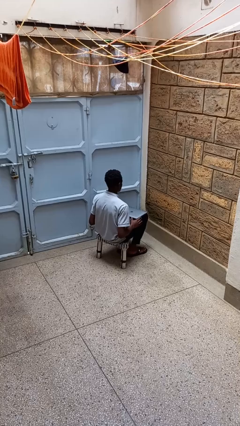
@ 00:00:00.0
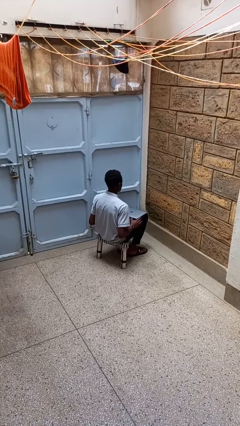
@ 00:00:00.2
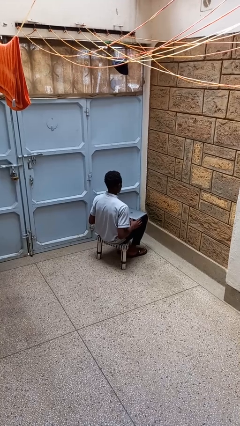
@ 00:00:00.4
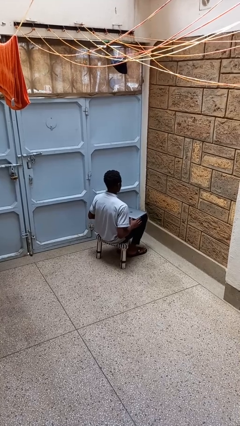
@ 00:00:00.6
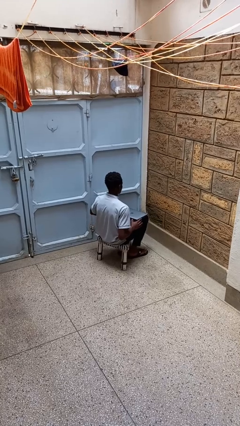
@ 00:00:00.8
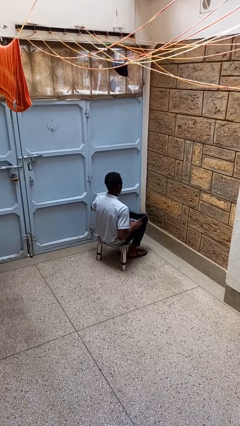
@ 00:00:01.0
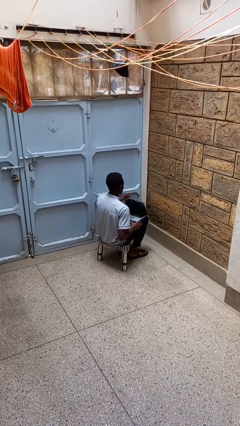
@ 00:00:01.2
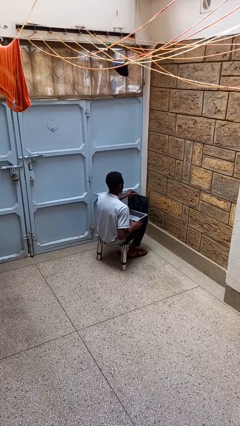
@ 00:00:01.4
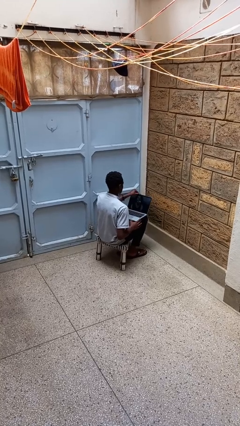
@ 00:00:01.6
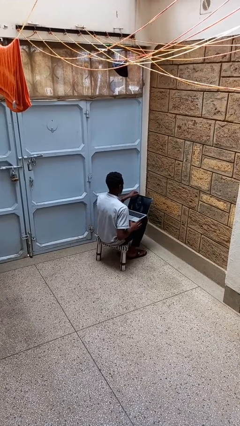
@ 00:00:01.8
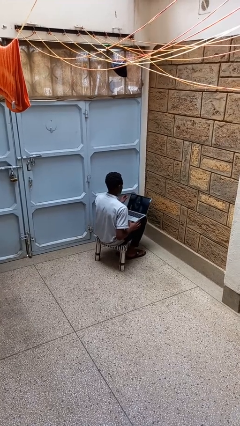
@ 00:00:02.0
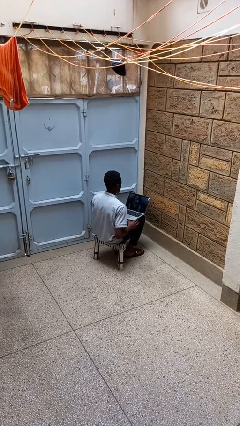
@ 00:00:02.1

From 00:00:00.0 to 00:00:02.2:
person opens laptop

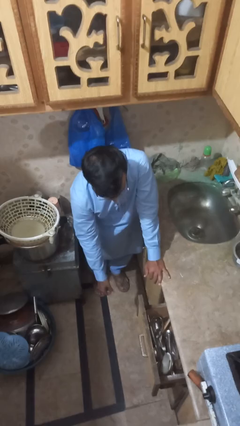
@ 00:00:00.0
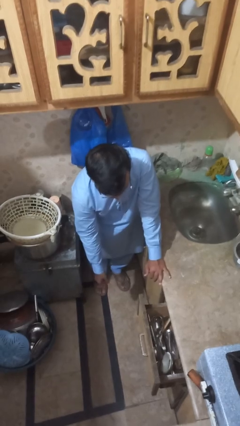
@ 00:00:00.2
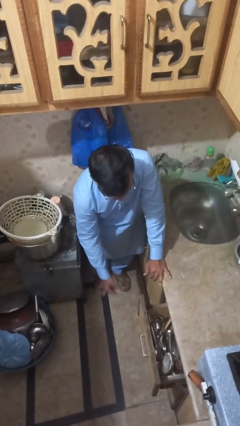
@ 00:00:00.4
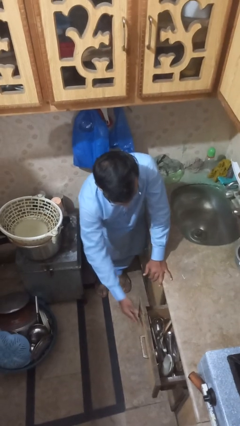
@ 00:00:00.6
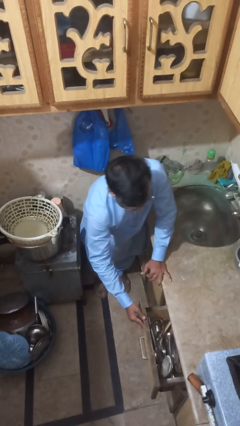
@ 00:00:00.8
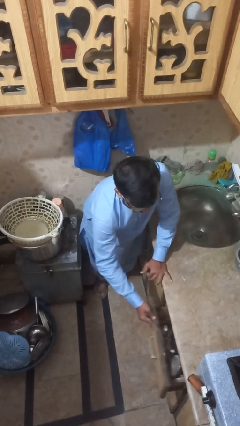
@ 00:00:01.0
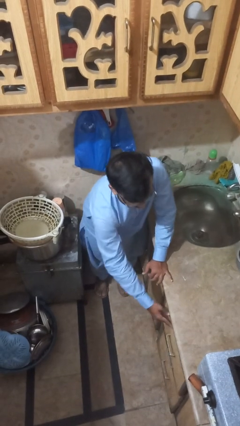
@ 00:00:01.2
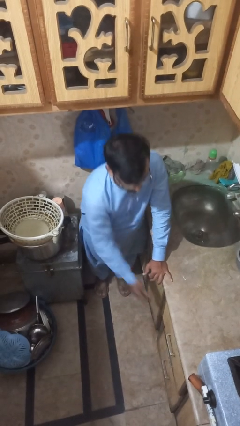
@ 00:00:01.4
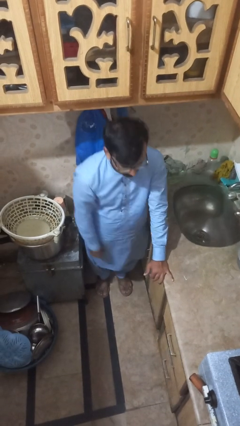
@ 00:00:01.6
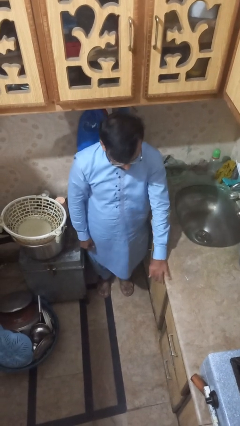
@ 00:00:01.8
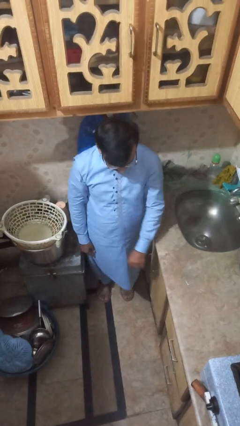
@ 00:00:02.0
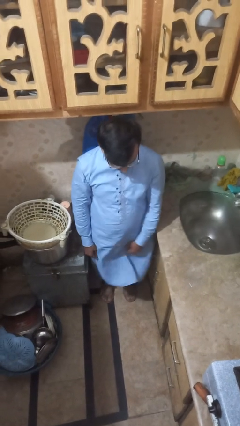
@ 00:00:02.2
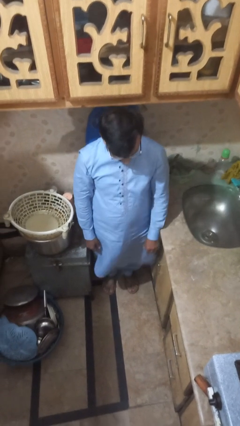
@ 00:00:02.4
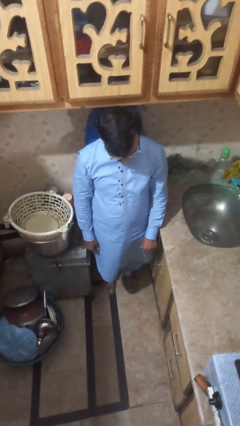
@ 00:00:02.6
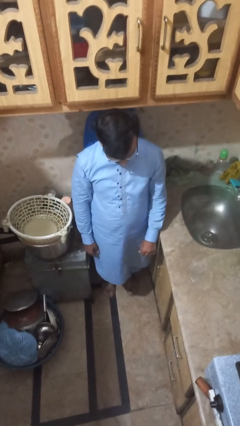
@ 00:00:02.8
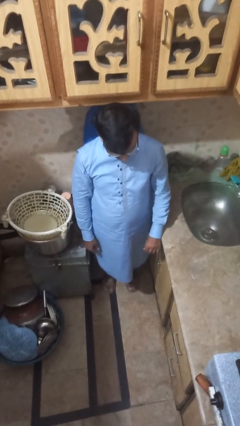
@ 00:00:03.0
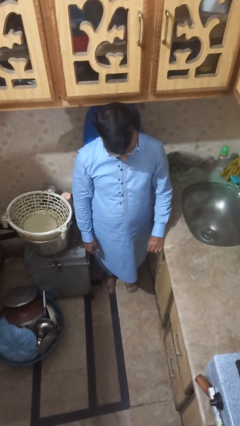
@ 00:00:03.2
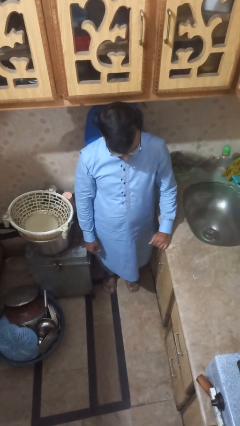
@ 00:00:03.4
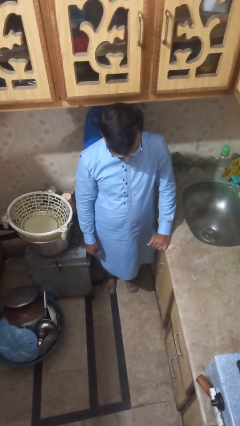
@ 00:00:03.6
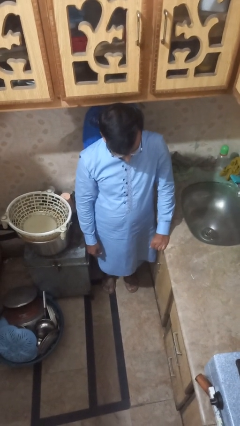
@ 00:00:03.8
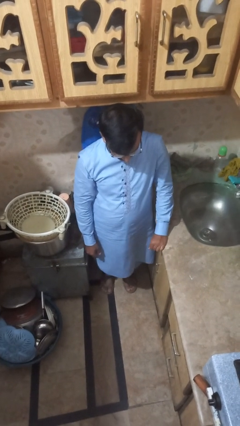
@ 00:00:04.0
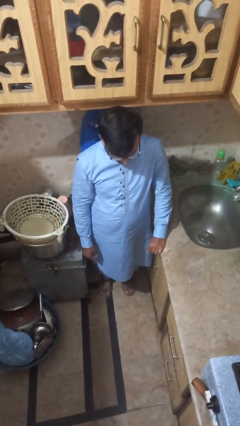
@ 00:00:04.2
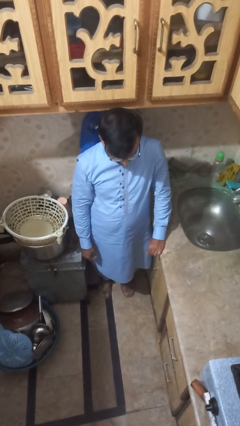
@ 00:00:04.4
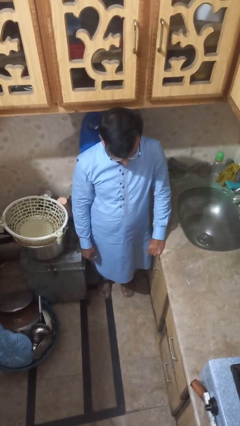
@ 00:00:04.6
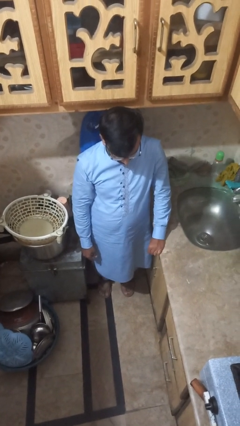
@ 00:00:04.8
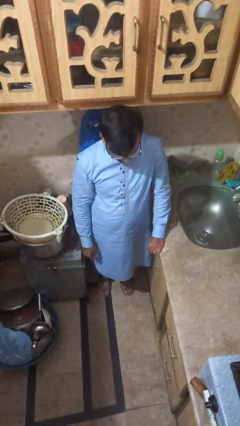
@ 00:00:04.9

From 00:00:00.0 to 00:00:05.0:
person closes kitchen drawer

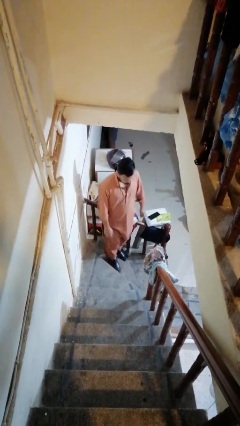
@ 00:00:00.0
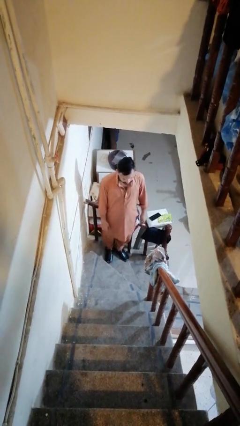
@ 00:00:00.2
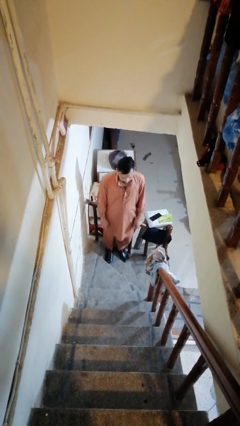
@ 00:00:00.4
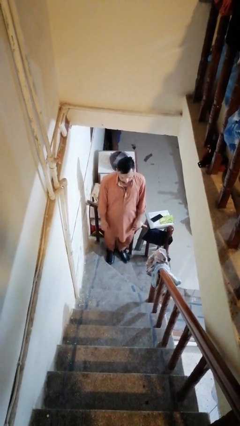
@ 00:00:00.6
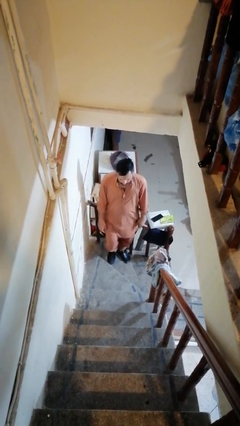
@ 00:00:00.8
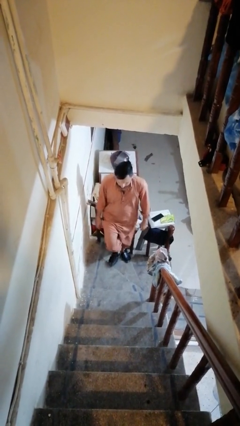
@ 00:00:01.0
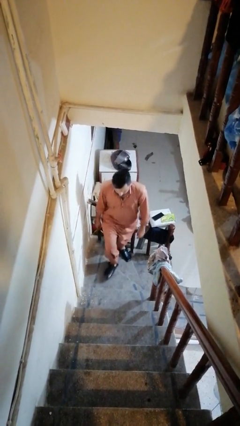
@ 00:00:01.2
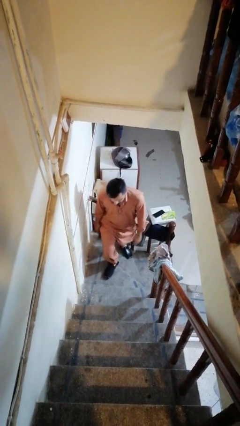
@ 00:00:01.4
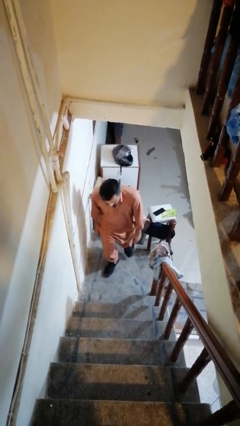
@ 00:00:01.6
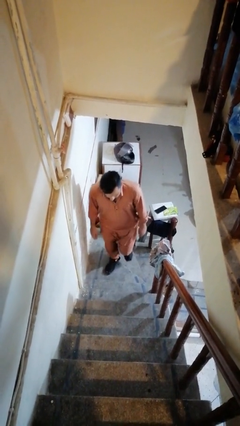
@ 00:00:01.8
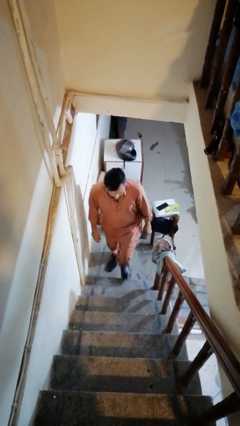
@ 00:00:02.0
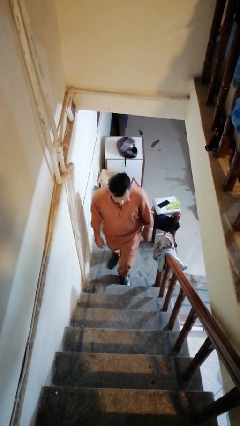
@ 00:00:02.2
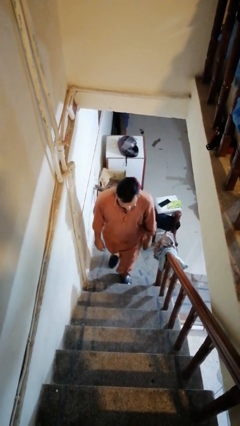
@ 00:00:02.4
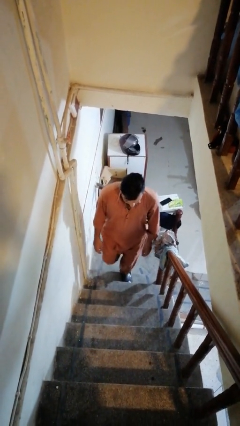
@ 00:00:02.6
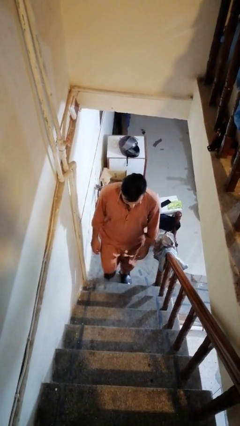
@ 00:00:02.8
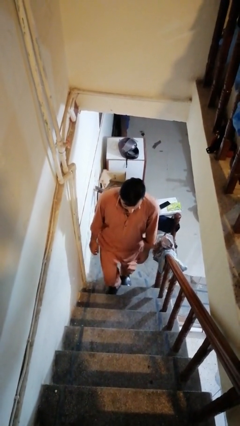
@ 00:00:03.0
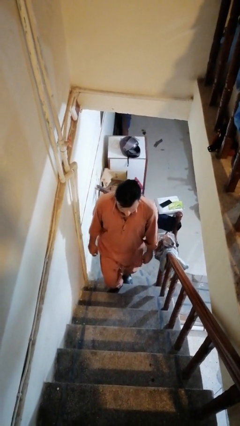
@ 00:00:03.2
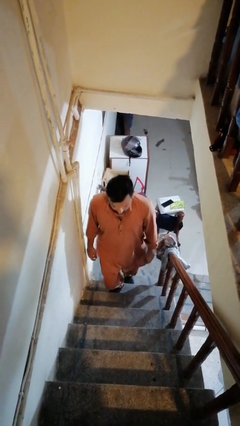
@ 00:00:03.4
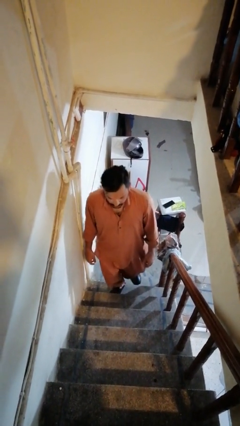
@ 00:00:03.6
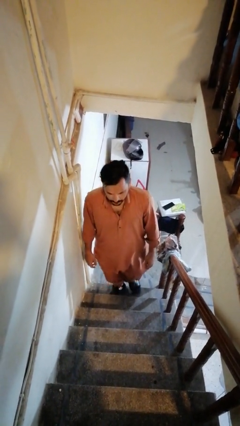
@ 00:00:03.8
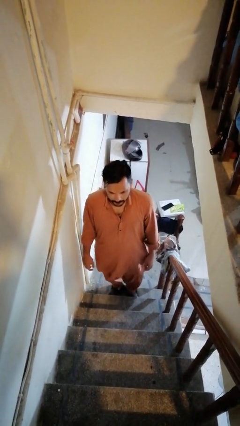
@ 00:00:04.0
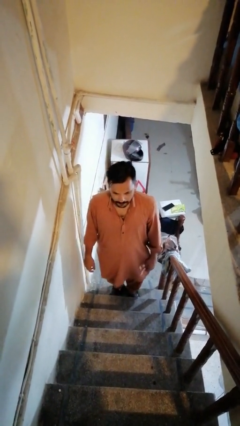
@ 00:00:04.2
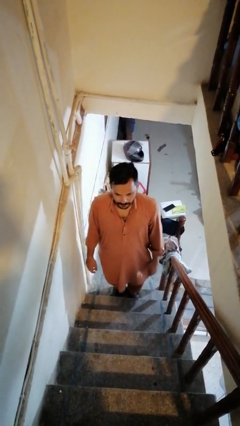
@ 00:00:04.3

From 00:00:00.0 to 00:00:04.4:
person climbs up stairs

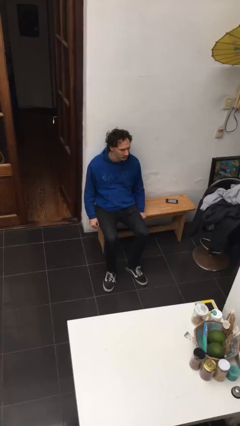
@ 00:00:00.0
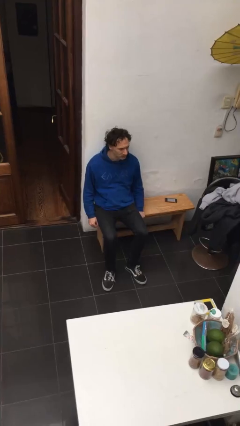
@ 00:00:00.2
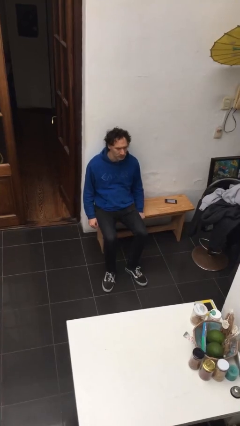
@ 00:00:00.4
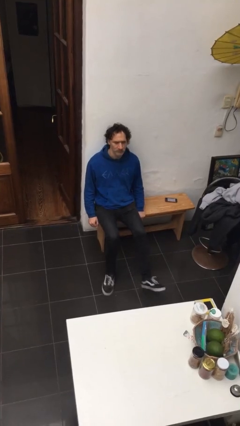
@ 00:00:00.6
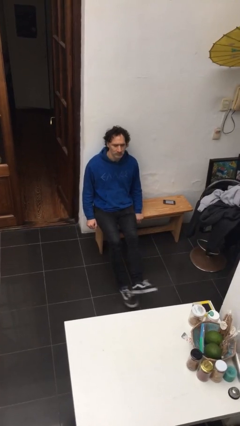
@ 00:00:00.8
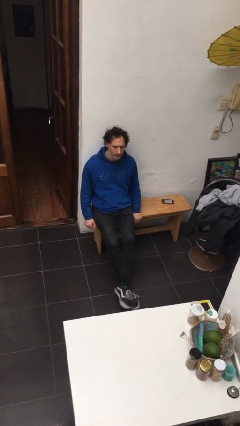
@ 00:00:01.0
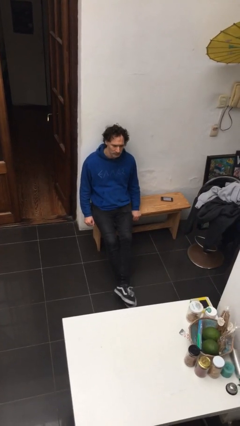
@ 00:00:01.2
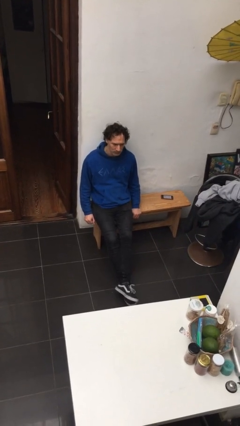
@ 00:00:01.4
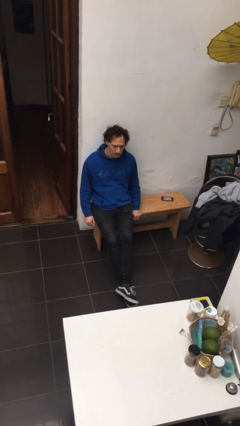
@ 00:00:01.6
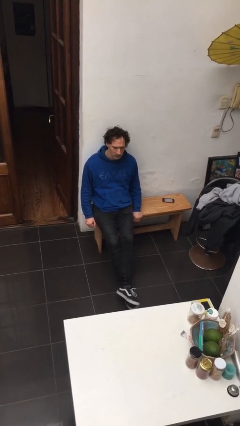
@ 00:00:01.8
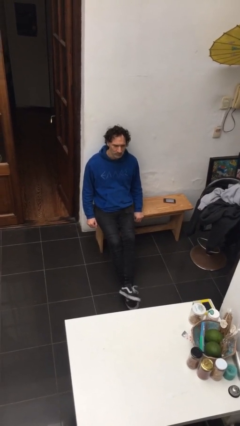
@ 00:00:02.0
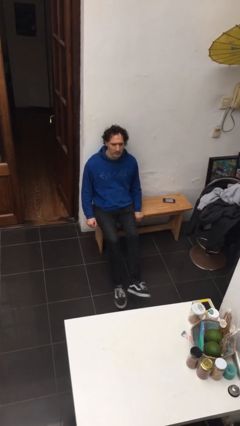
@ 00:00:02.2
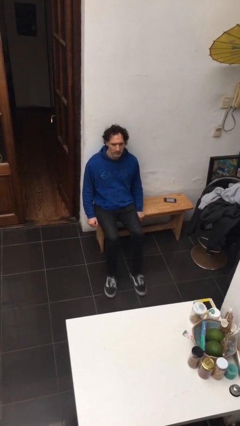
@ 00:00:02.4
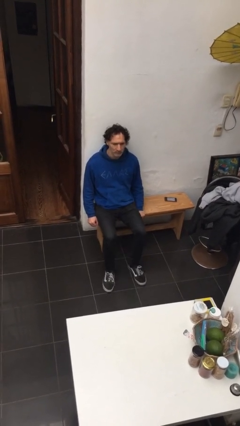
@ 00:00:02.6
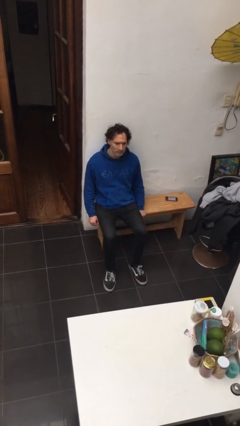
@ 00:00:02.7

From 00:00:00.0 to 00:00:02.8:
person crosses legs

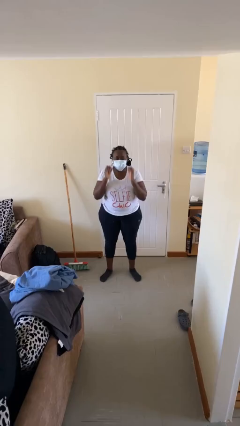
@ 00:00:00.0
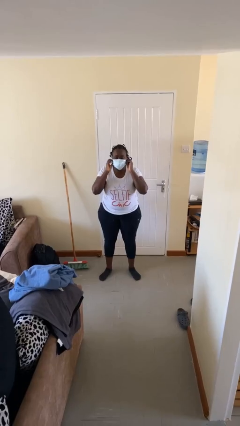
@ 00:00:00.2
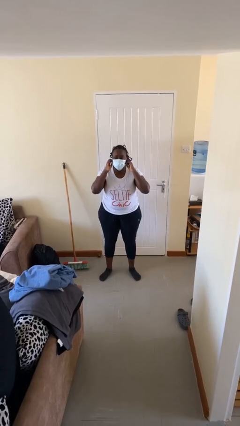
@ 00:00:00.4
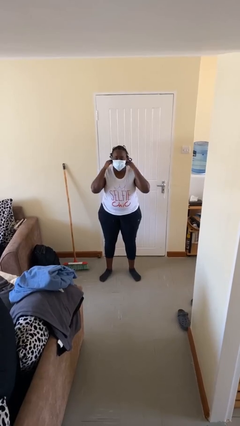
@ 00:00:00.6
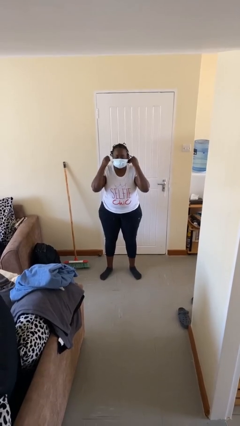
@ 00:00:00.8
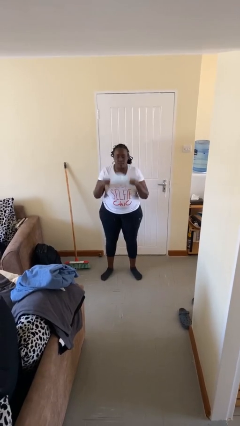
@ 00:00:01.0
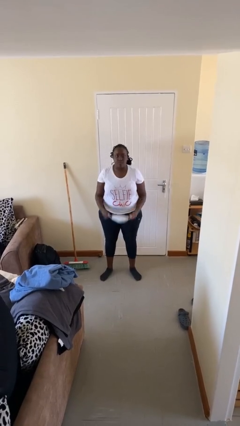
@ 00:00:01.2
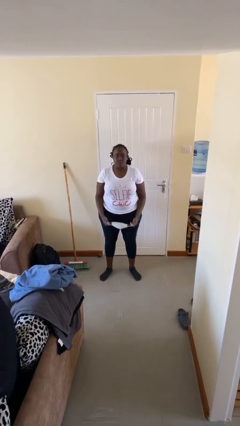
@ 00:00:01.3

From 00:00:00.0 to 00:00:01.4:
person takes off facemask

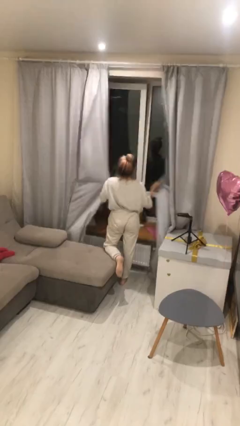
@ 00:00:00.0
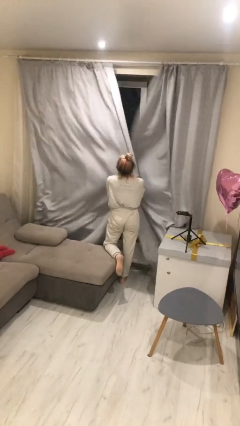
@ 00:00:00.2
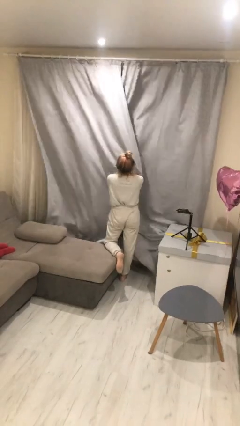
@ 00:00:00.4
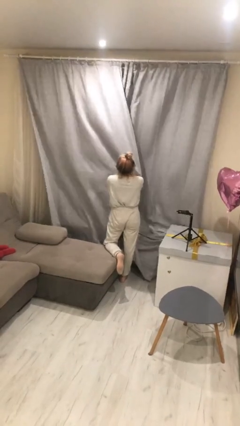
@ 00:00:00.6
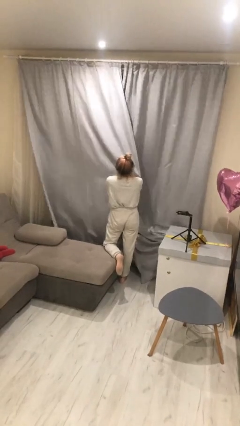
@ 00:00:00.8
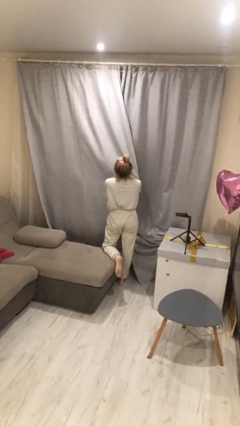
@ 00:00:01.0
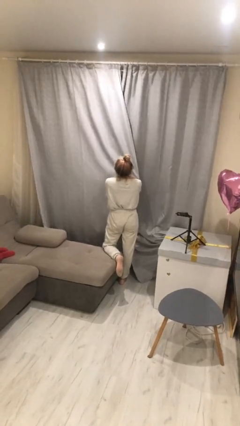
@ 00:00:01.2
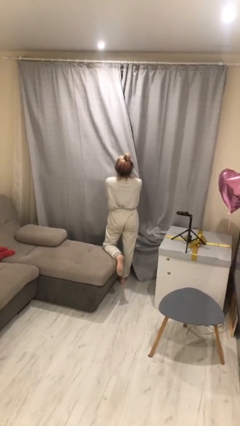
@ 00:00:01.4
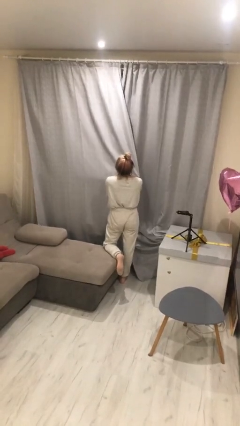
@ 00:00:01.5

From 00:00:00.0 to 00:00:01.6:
person closes curtains
